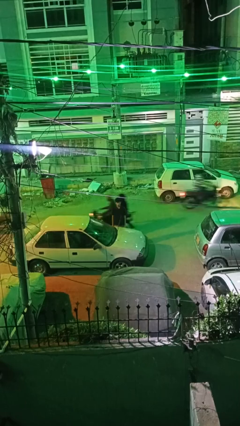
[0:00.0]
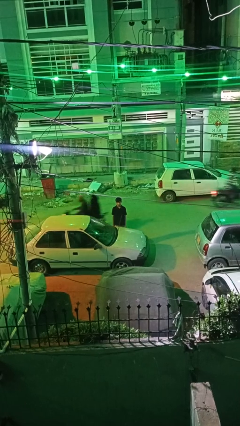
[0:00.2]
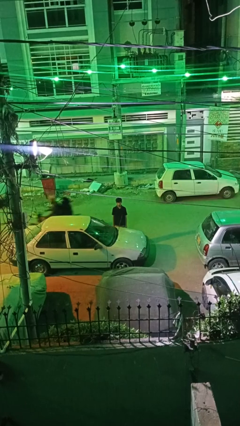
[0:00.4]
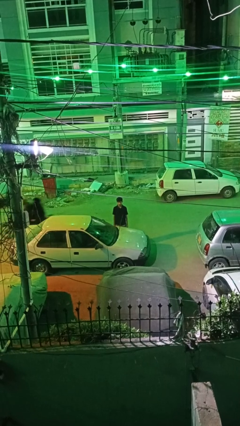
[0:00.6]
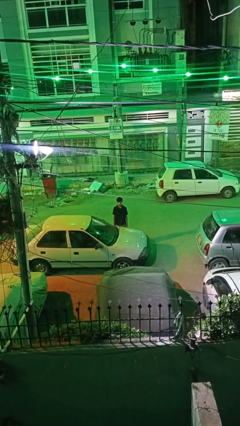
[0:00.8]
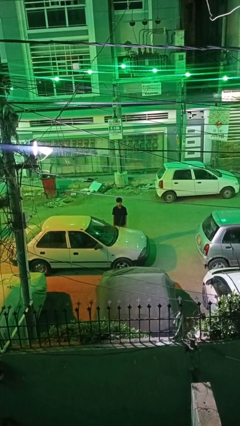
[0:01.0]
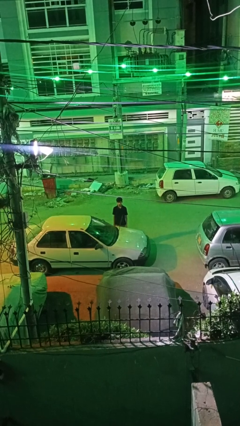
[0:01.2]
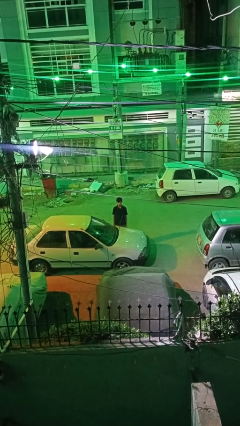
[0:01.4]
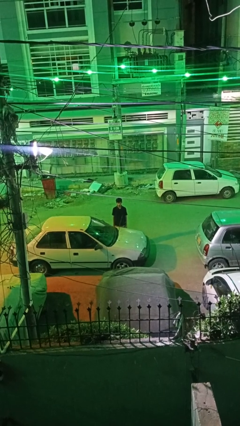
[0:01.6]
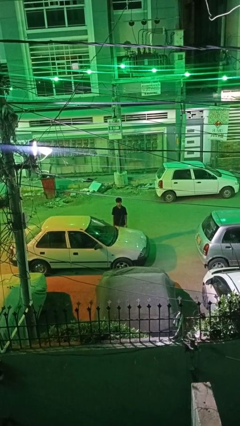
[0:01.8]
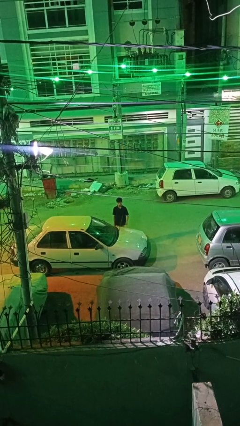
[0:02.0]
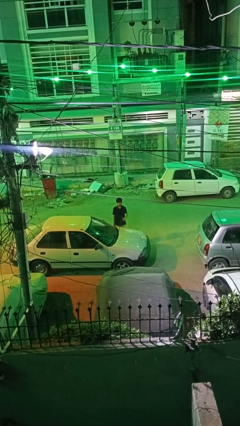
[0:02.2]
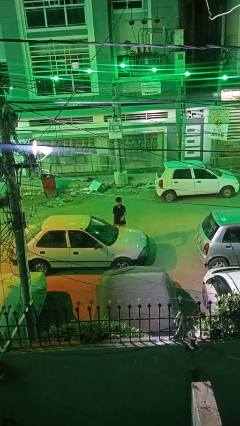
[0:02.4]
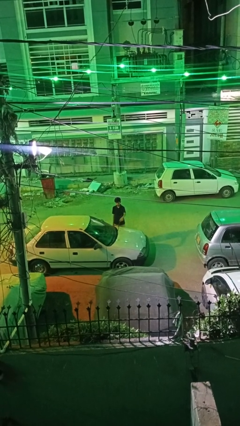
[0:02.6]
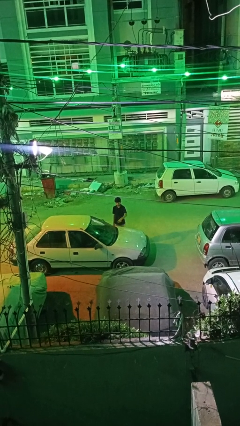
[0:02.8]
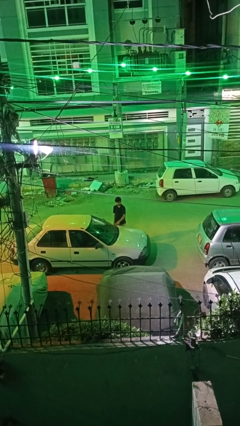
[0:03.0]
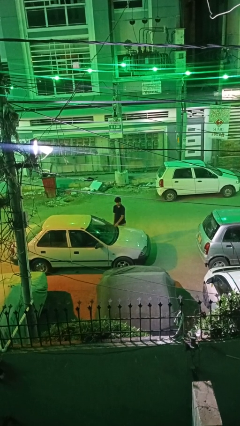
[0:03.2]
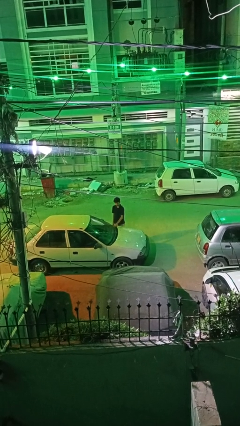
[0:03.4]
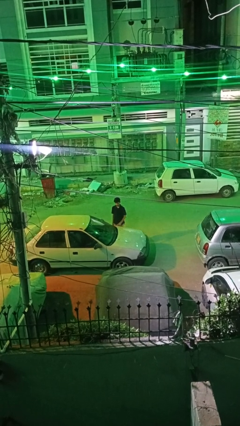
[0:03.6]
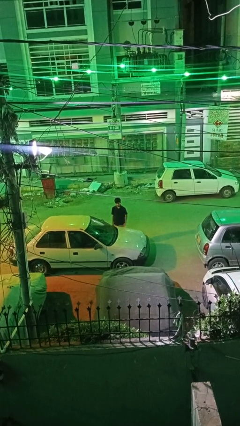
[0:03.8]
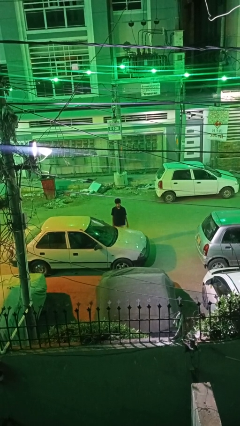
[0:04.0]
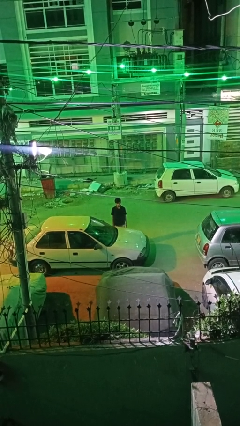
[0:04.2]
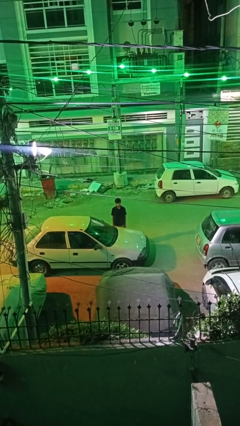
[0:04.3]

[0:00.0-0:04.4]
person flips down car wipers

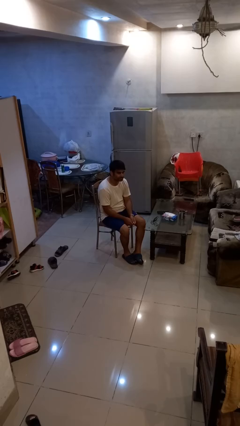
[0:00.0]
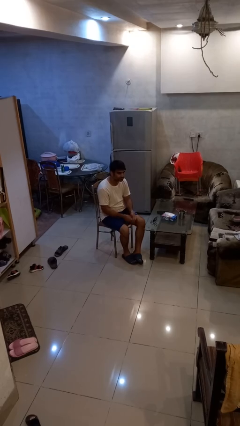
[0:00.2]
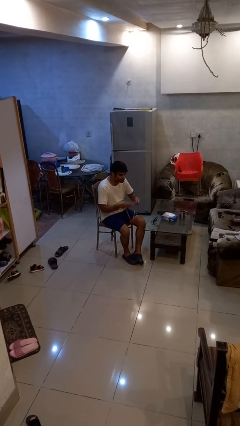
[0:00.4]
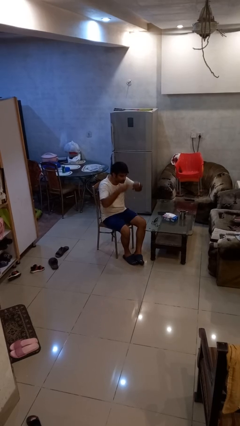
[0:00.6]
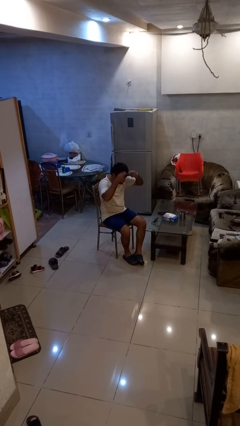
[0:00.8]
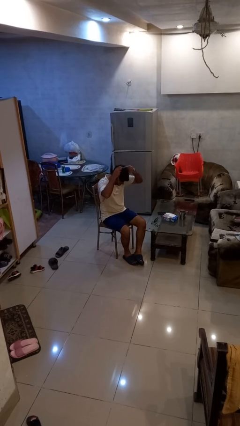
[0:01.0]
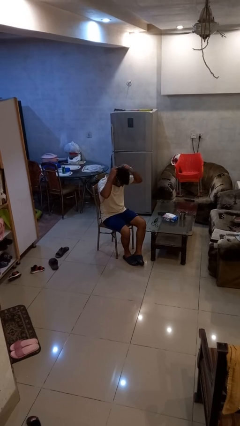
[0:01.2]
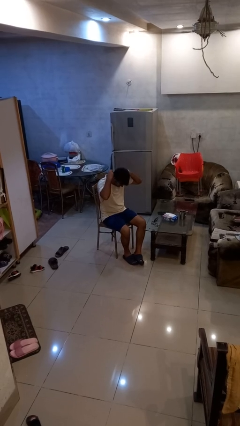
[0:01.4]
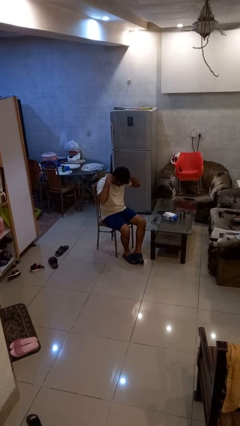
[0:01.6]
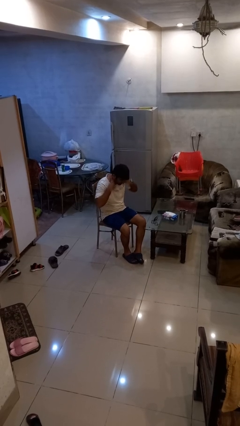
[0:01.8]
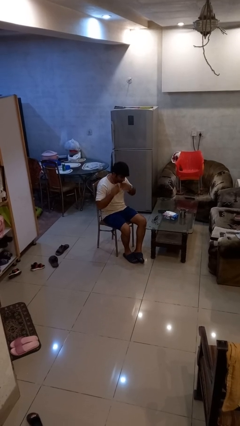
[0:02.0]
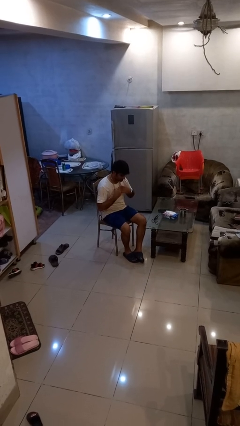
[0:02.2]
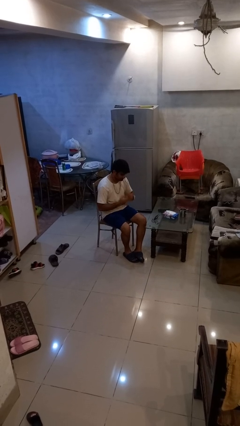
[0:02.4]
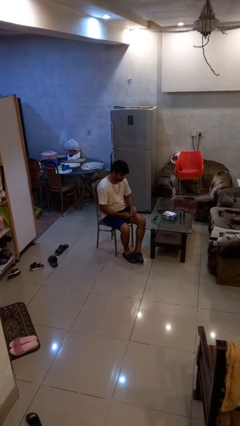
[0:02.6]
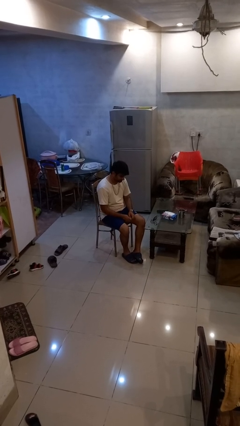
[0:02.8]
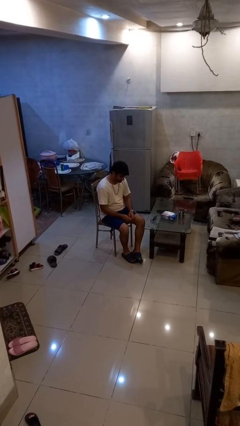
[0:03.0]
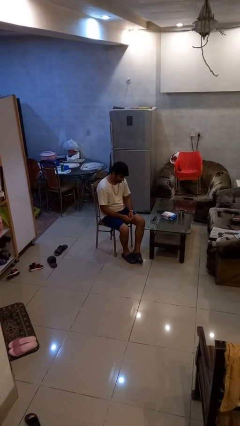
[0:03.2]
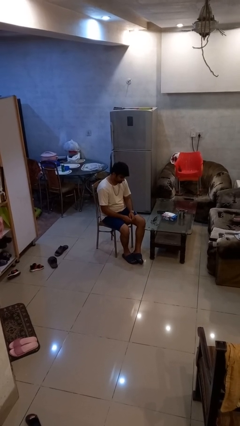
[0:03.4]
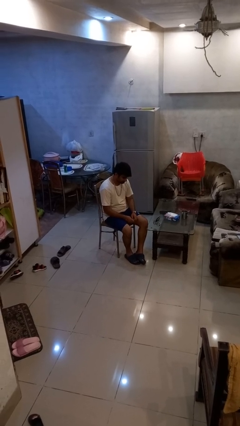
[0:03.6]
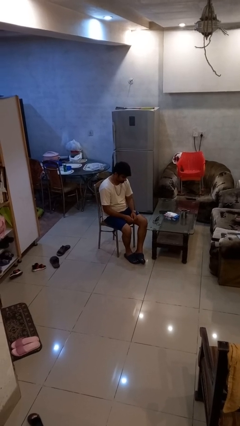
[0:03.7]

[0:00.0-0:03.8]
person puts on necklace

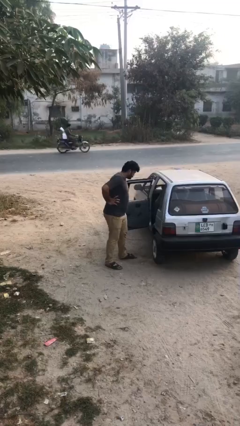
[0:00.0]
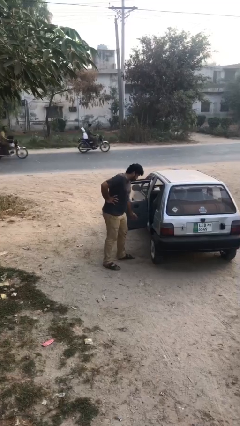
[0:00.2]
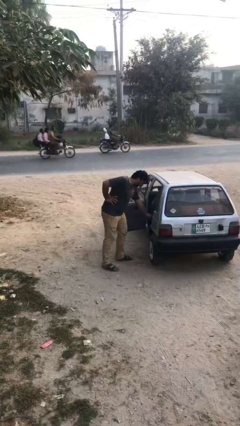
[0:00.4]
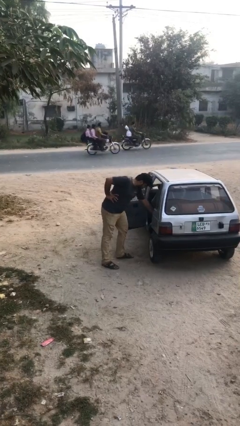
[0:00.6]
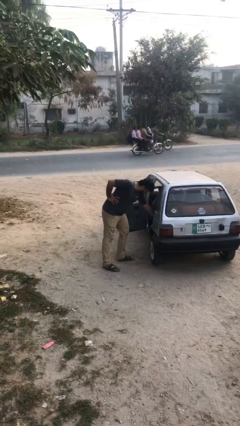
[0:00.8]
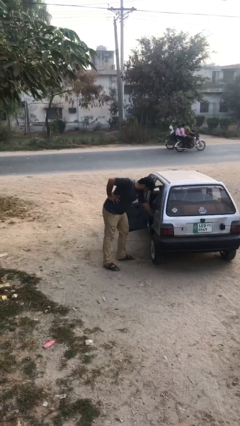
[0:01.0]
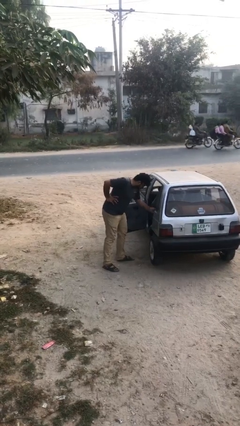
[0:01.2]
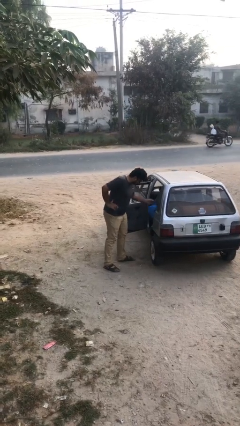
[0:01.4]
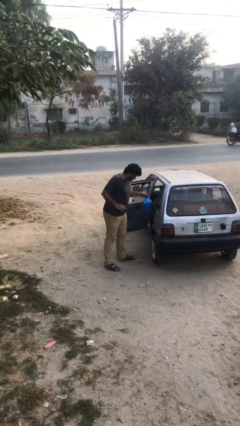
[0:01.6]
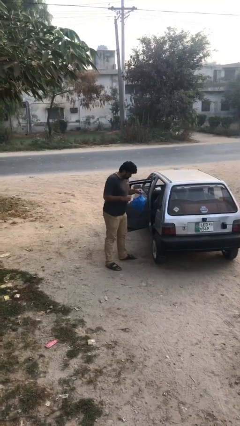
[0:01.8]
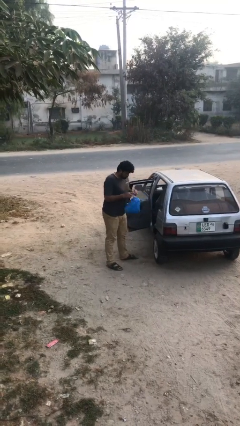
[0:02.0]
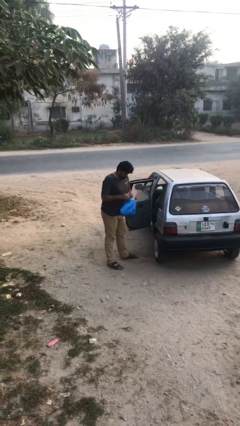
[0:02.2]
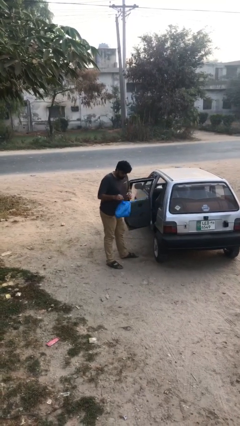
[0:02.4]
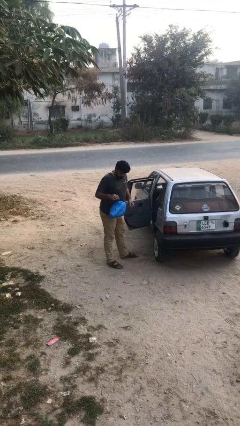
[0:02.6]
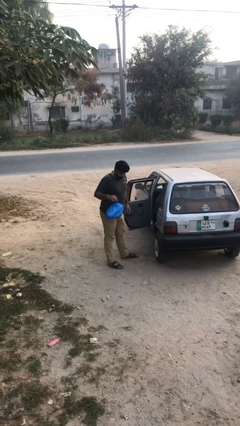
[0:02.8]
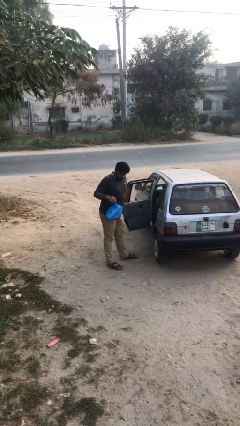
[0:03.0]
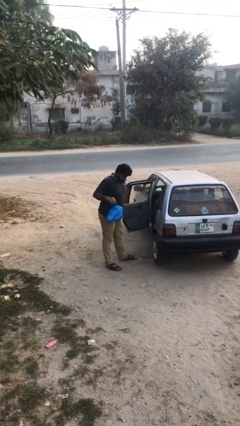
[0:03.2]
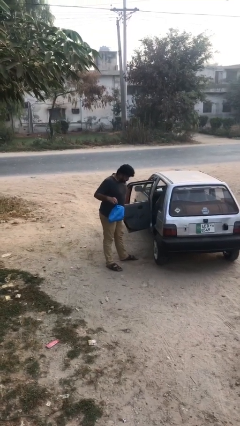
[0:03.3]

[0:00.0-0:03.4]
person unloads car

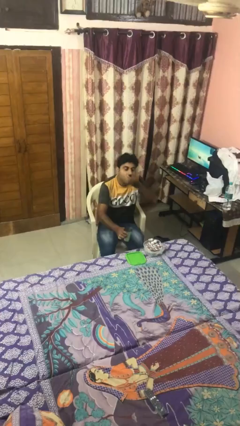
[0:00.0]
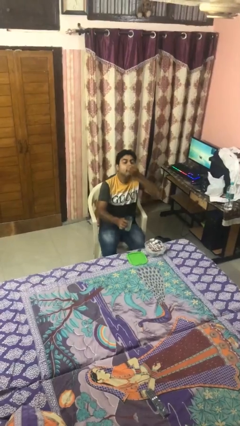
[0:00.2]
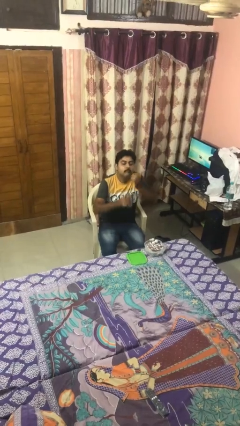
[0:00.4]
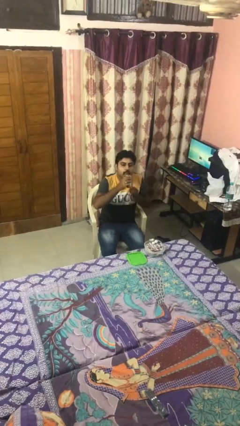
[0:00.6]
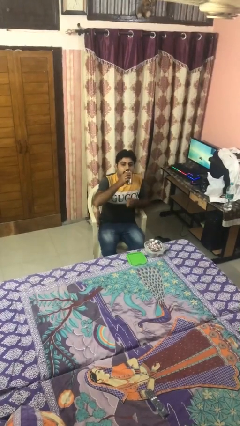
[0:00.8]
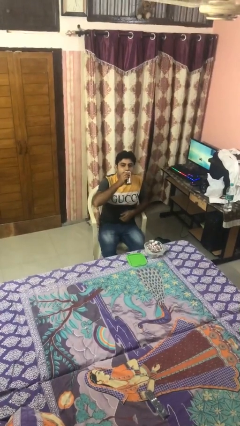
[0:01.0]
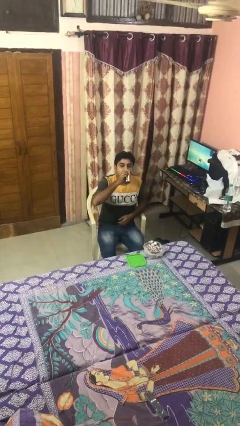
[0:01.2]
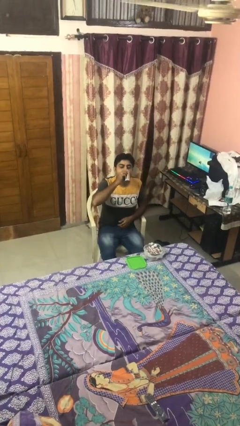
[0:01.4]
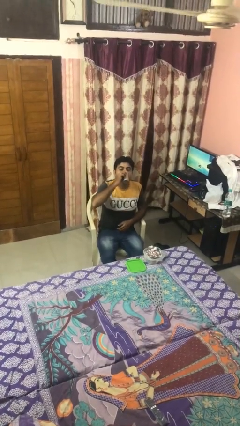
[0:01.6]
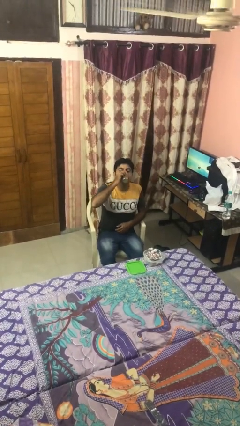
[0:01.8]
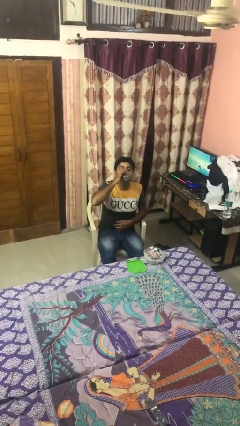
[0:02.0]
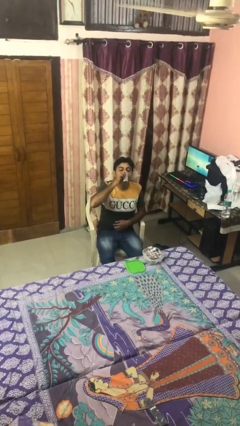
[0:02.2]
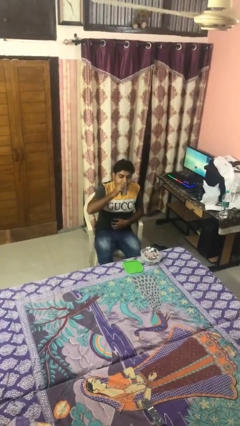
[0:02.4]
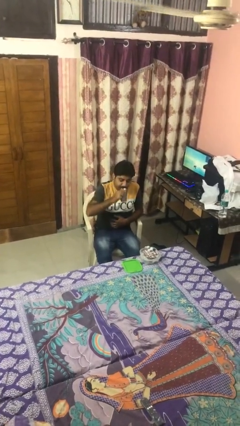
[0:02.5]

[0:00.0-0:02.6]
person drinks from cup

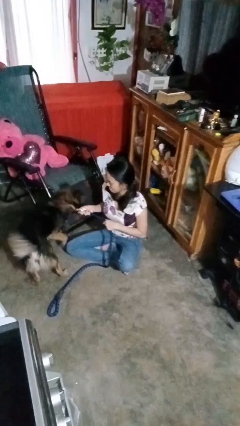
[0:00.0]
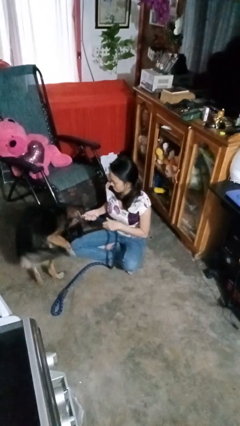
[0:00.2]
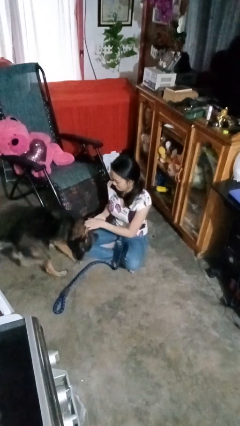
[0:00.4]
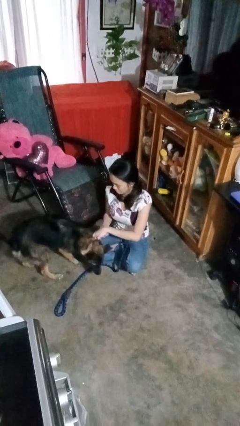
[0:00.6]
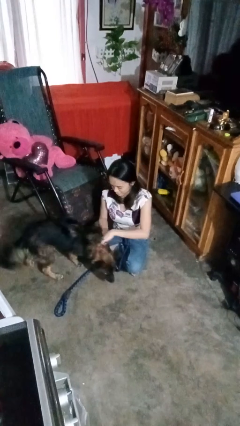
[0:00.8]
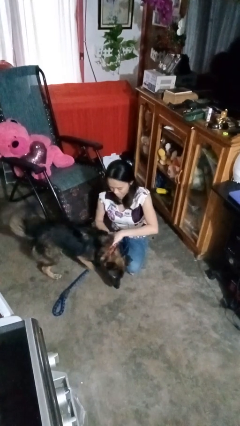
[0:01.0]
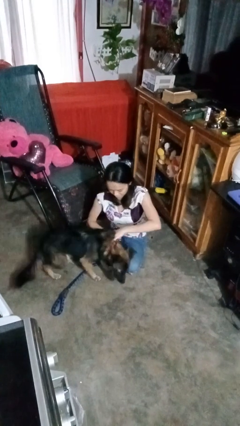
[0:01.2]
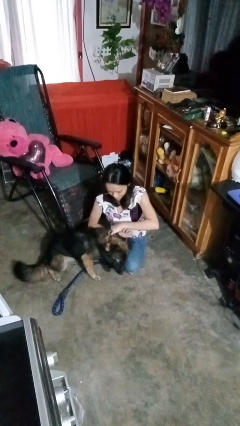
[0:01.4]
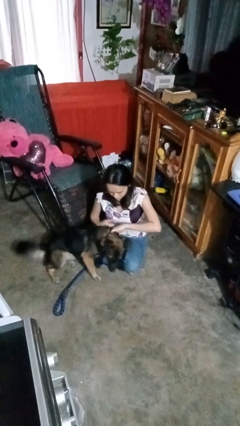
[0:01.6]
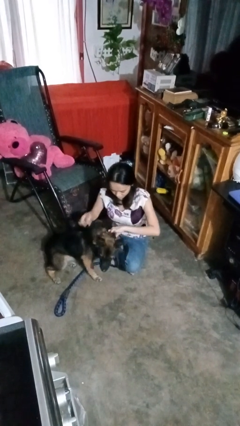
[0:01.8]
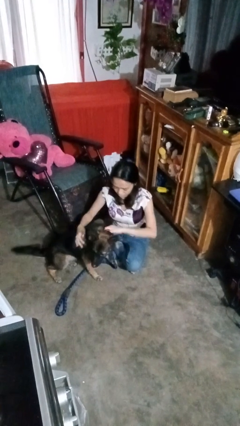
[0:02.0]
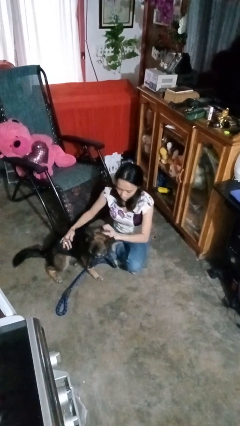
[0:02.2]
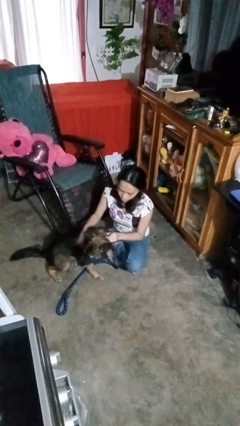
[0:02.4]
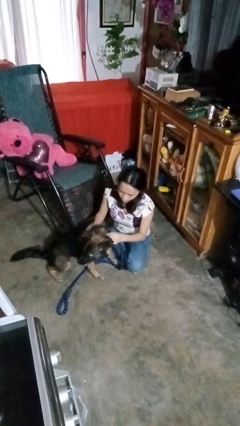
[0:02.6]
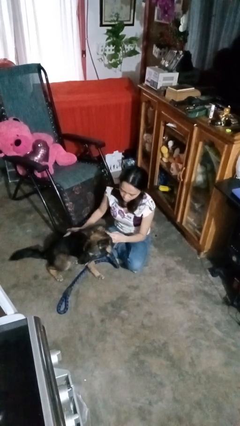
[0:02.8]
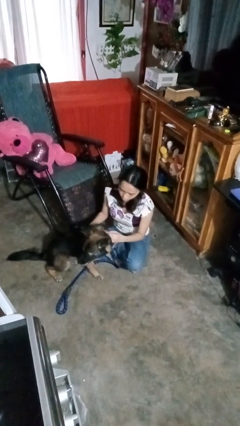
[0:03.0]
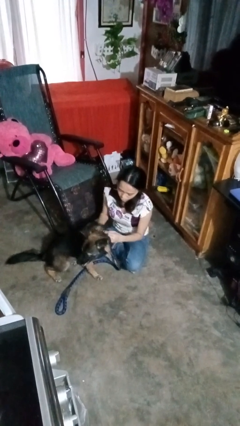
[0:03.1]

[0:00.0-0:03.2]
person unattaches leash from dog

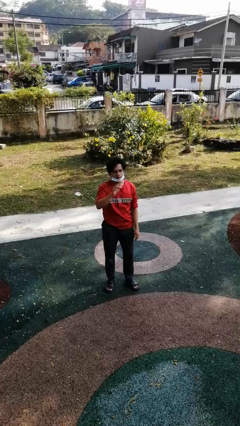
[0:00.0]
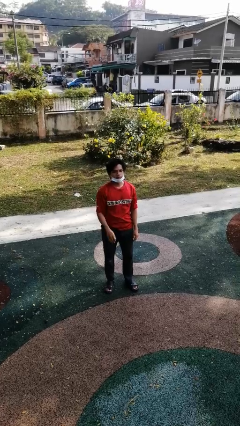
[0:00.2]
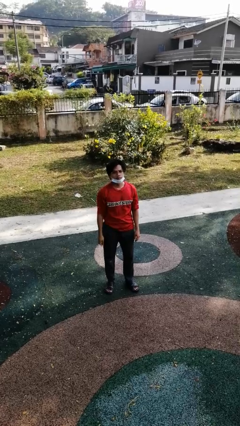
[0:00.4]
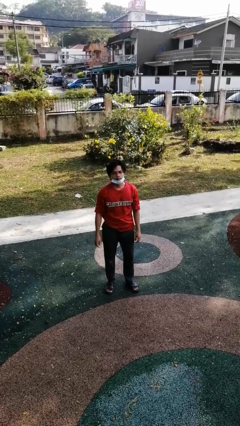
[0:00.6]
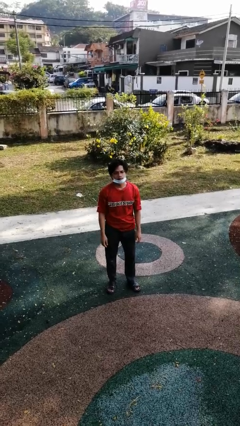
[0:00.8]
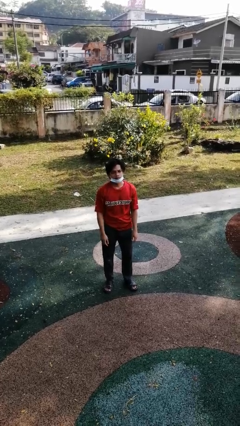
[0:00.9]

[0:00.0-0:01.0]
person gestures lower hand
